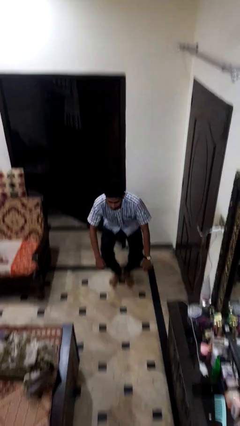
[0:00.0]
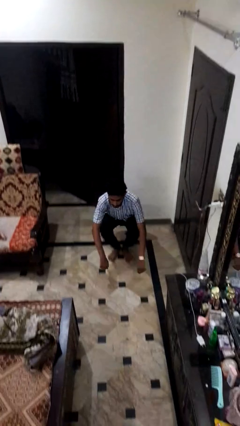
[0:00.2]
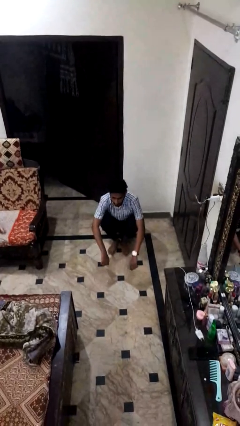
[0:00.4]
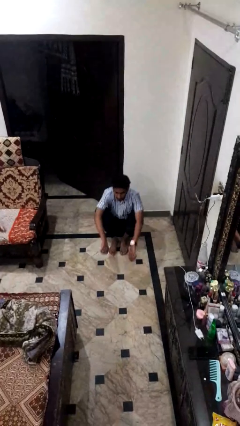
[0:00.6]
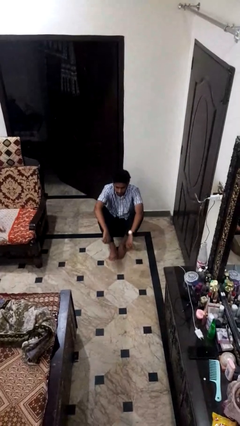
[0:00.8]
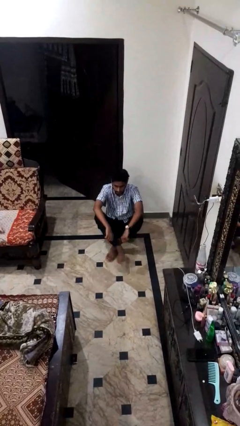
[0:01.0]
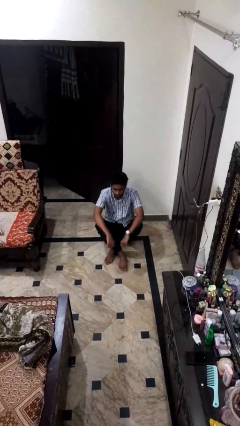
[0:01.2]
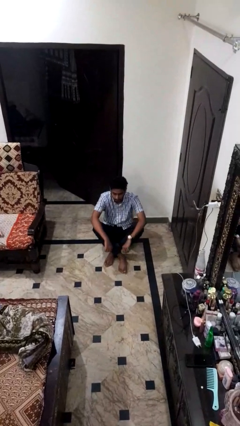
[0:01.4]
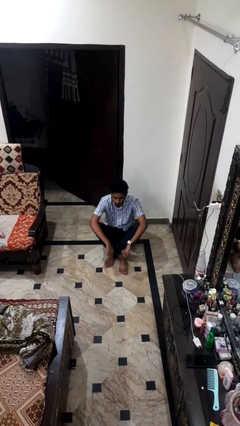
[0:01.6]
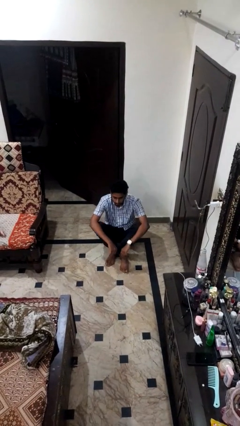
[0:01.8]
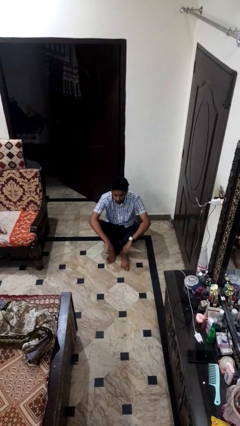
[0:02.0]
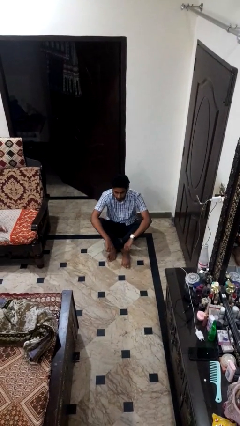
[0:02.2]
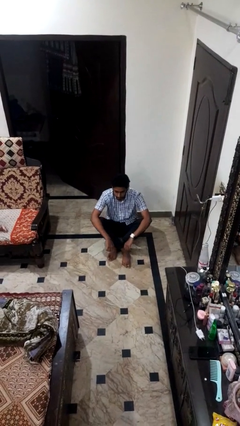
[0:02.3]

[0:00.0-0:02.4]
person sits crisscross

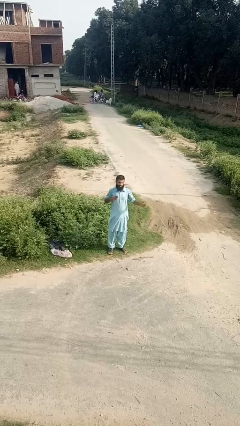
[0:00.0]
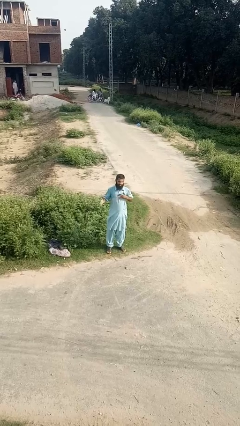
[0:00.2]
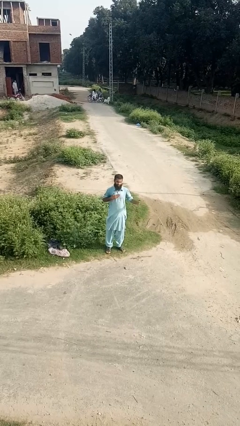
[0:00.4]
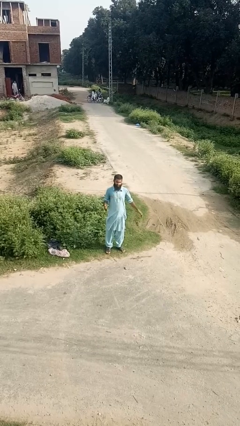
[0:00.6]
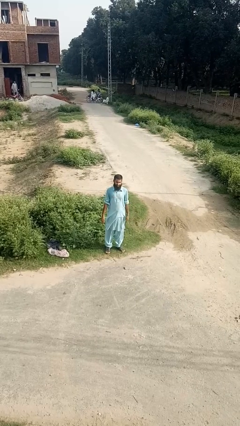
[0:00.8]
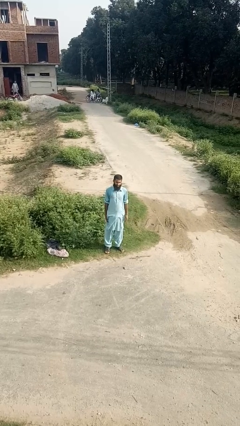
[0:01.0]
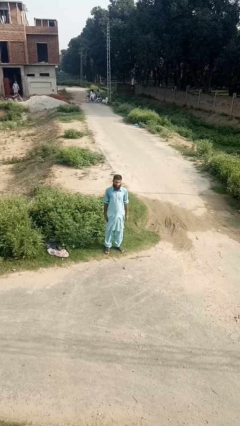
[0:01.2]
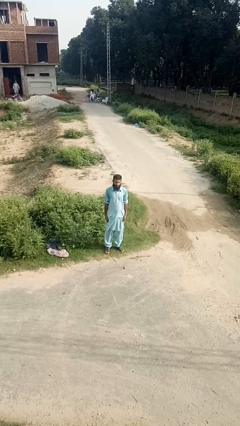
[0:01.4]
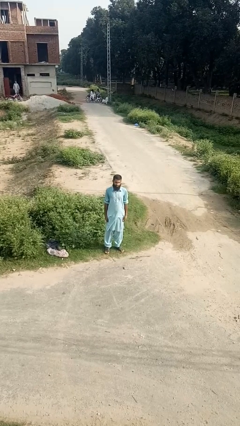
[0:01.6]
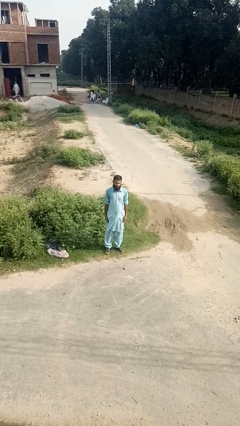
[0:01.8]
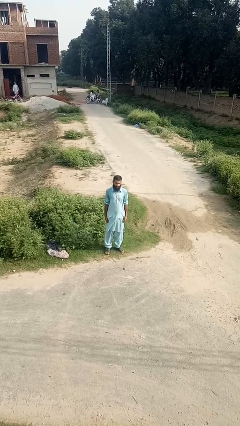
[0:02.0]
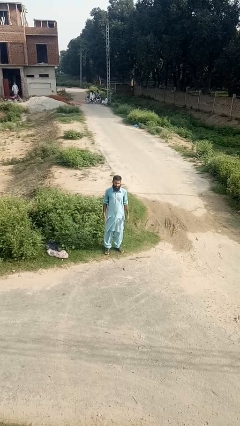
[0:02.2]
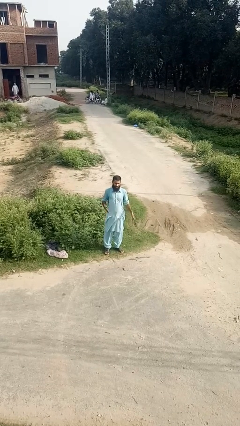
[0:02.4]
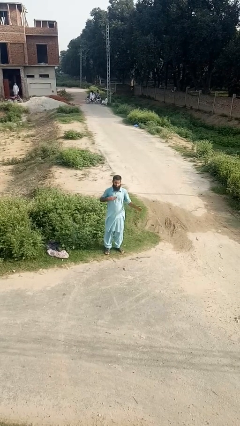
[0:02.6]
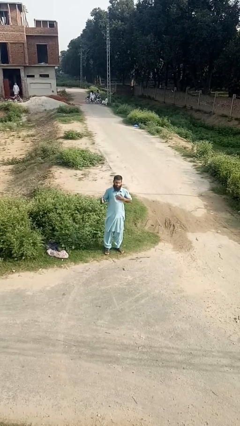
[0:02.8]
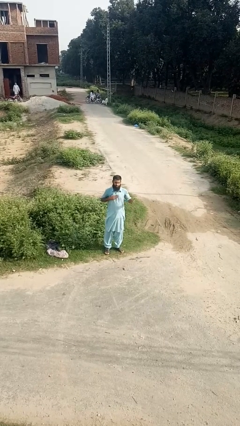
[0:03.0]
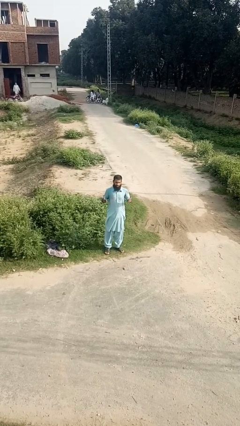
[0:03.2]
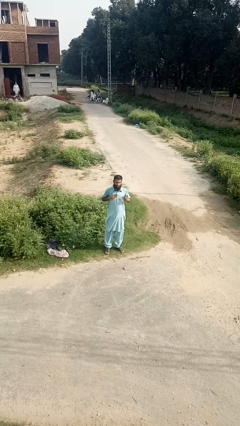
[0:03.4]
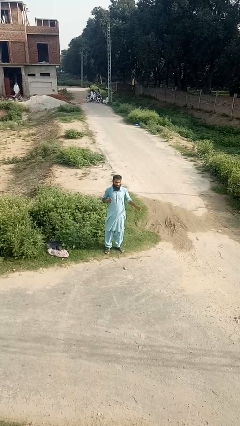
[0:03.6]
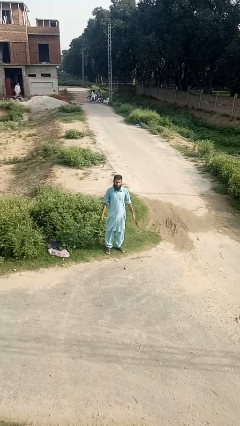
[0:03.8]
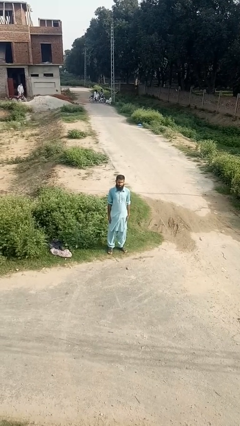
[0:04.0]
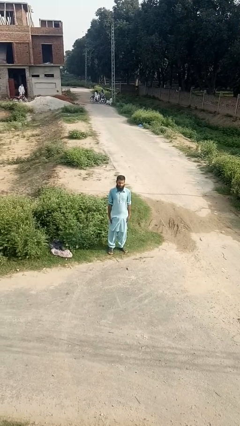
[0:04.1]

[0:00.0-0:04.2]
person drums on chest

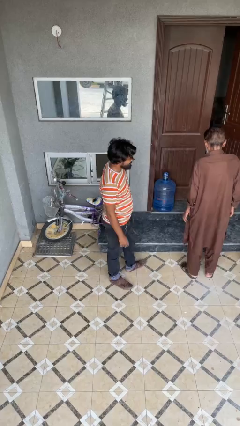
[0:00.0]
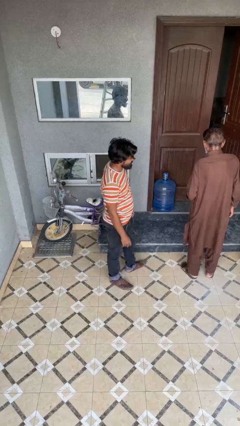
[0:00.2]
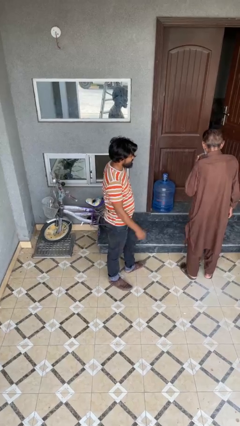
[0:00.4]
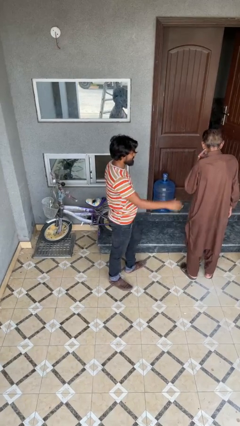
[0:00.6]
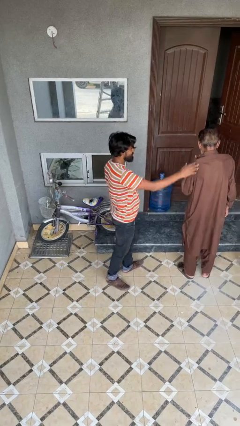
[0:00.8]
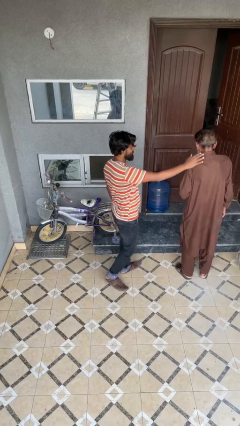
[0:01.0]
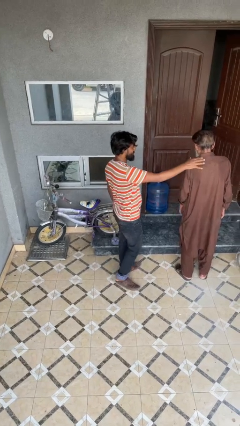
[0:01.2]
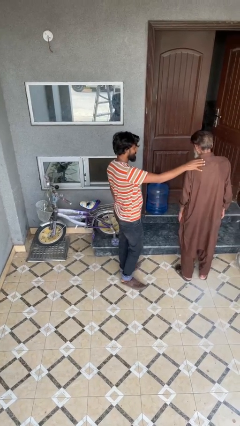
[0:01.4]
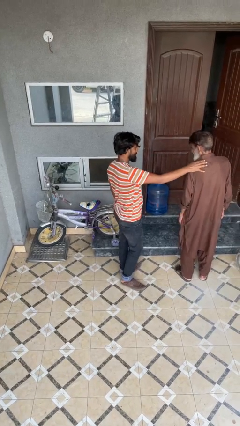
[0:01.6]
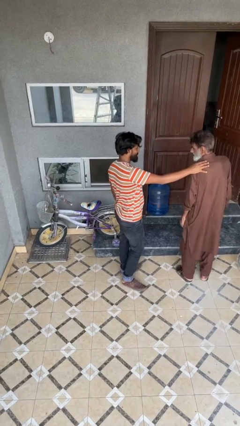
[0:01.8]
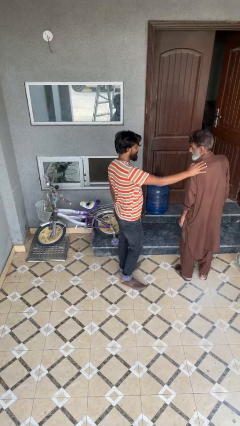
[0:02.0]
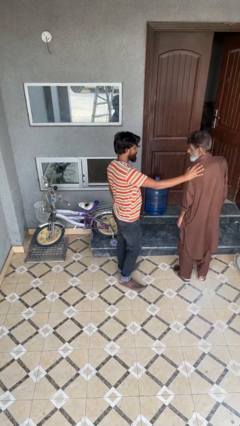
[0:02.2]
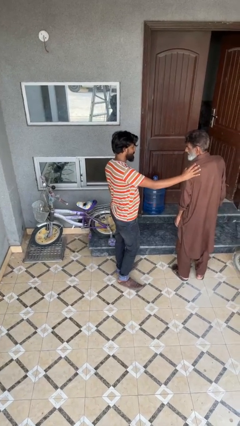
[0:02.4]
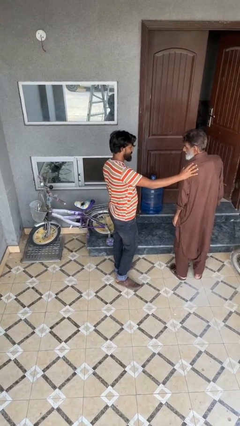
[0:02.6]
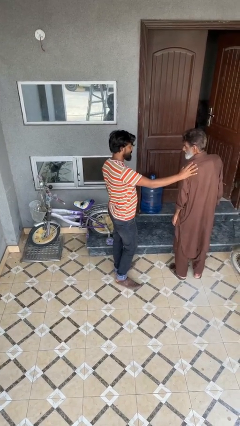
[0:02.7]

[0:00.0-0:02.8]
person touches back of person

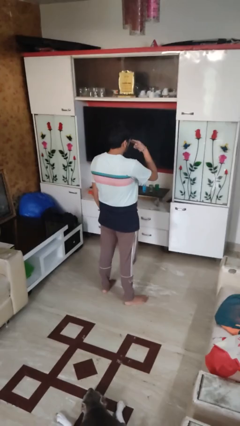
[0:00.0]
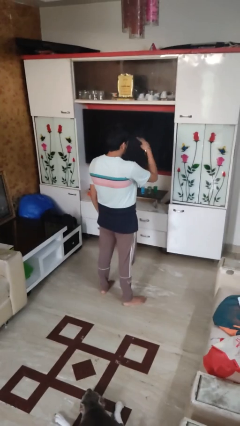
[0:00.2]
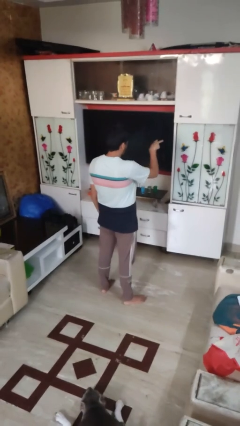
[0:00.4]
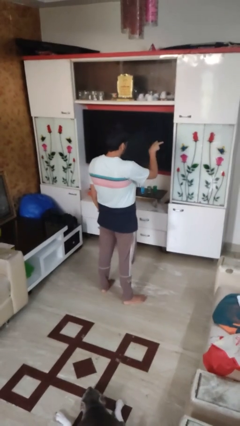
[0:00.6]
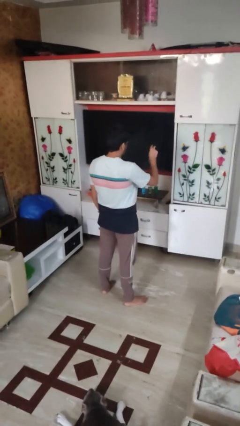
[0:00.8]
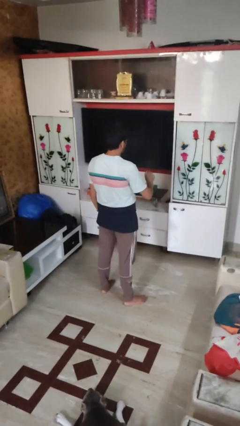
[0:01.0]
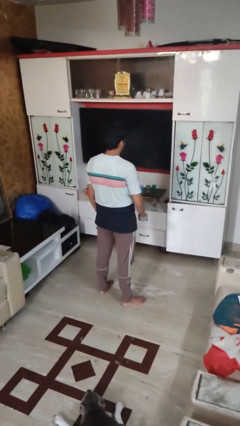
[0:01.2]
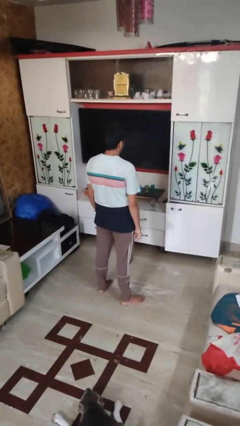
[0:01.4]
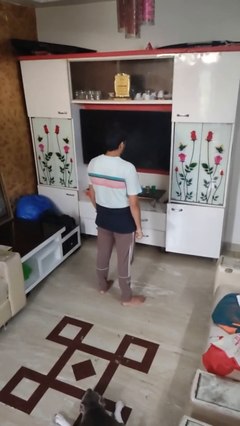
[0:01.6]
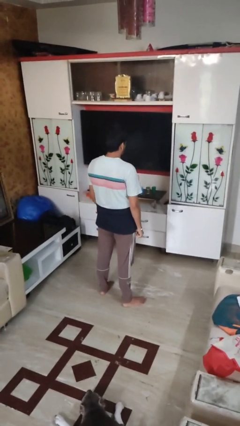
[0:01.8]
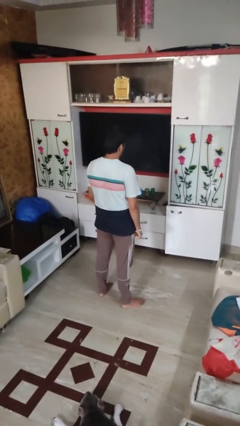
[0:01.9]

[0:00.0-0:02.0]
person gestures watch closely

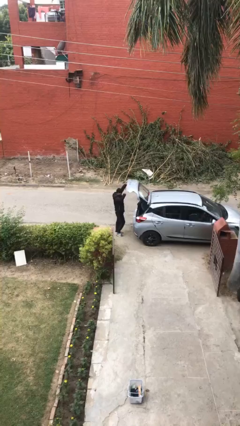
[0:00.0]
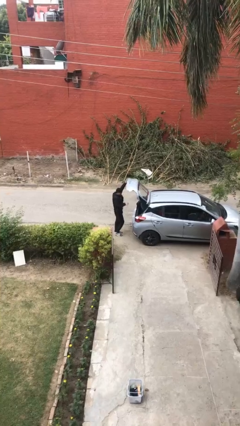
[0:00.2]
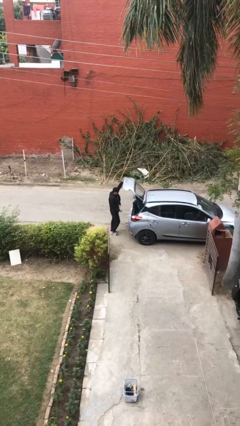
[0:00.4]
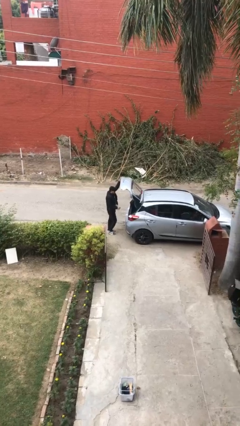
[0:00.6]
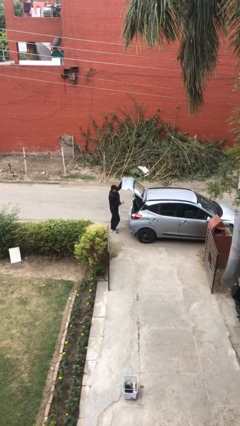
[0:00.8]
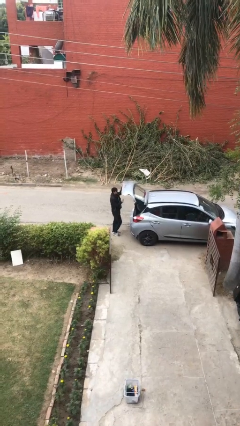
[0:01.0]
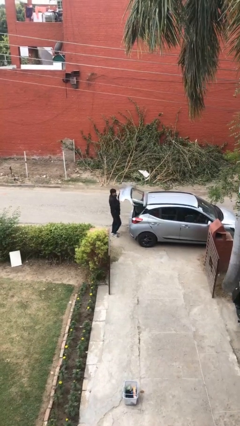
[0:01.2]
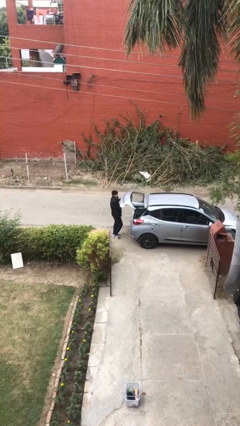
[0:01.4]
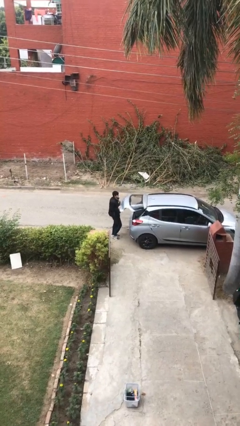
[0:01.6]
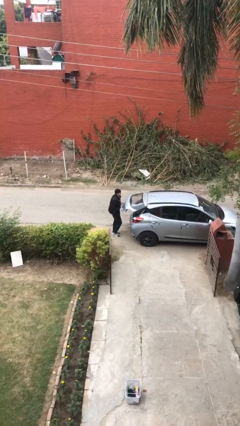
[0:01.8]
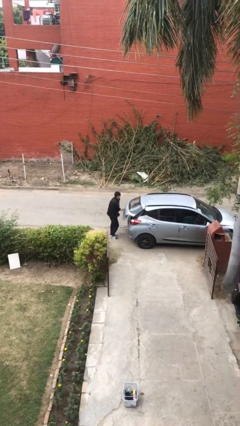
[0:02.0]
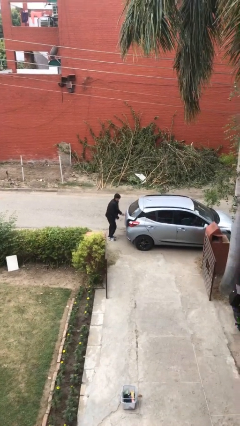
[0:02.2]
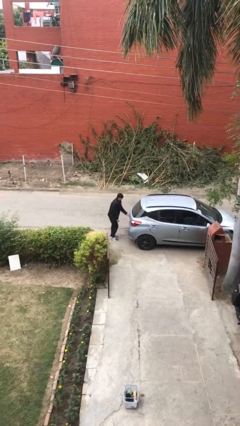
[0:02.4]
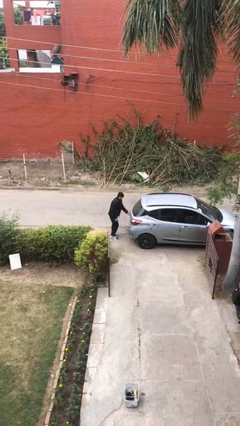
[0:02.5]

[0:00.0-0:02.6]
person closes car trunk

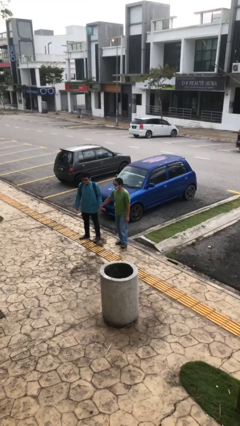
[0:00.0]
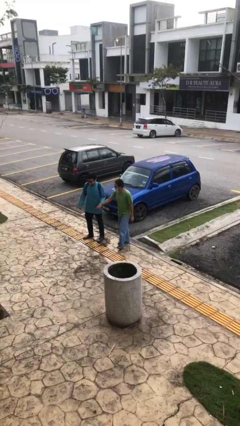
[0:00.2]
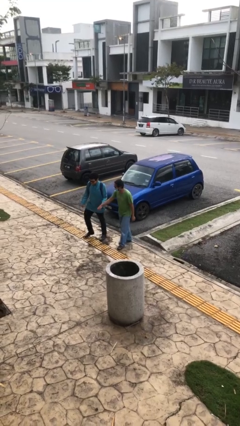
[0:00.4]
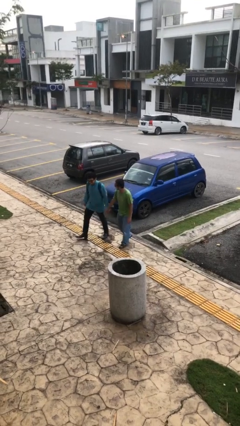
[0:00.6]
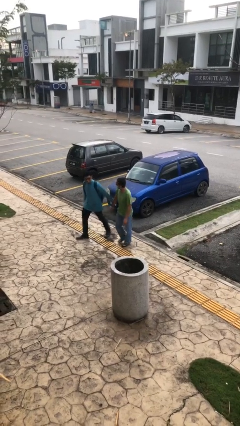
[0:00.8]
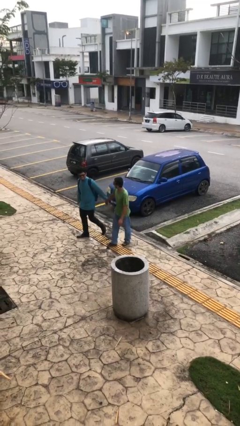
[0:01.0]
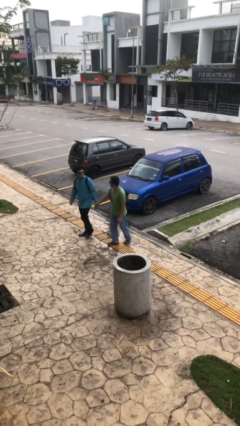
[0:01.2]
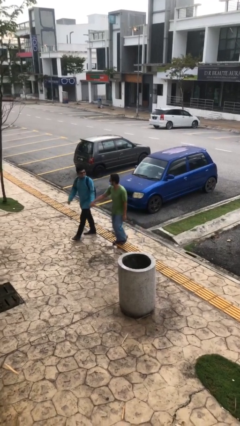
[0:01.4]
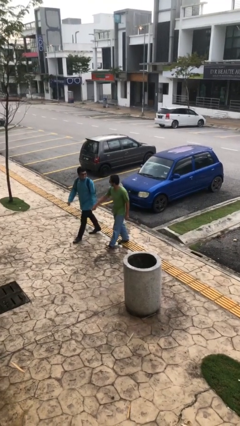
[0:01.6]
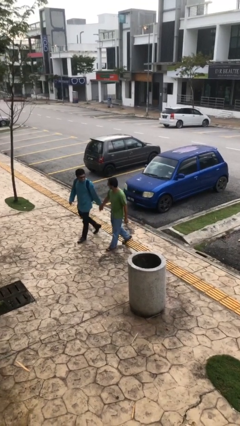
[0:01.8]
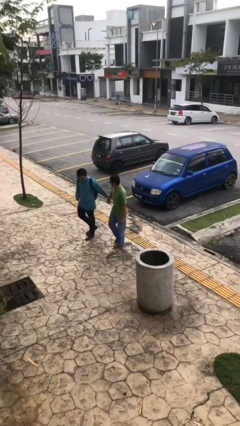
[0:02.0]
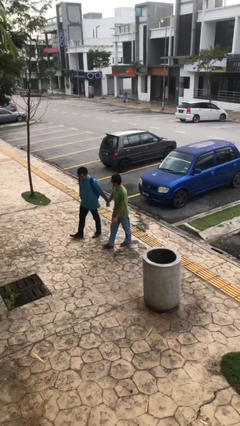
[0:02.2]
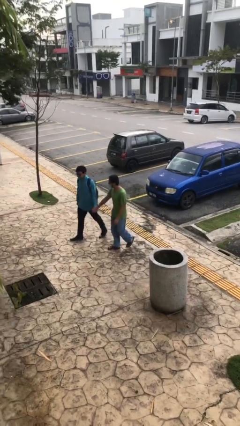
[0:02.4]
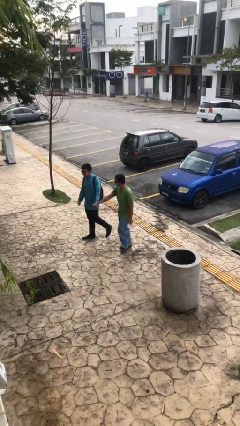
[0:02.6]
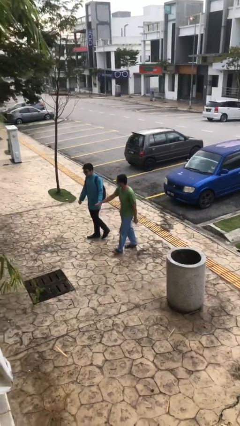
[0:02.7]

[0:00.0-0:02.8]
person holds hand

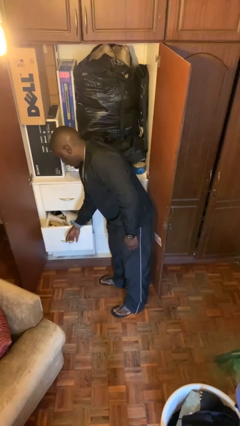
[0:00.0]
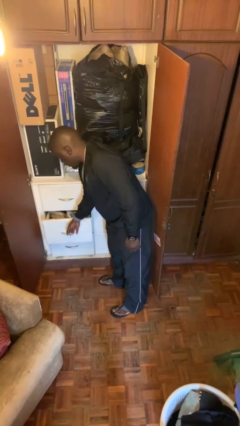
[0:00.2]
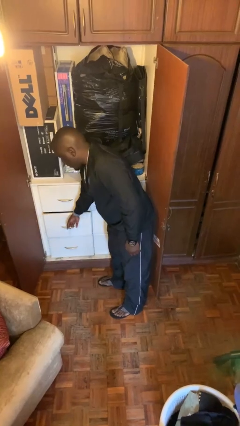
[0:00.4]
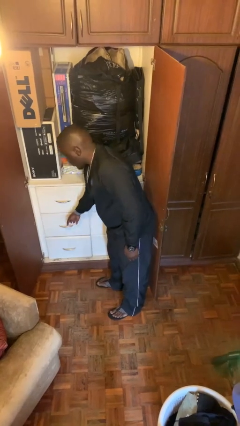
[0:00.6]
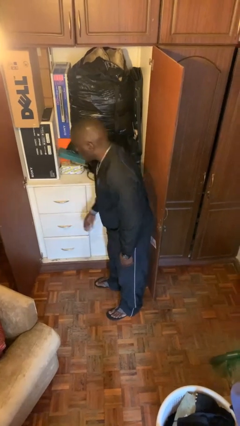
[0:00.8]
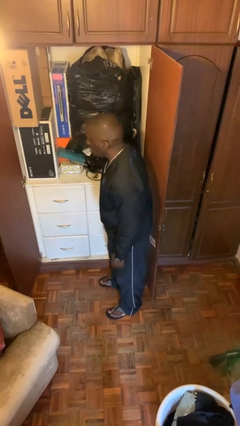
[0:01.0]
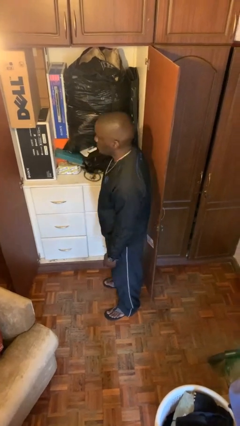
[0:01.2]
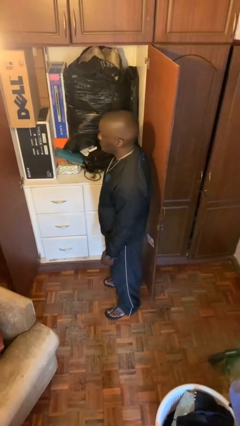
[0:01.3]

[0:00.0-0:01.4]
person closes dresser drawer
